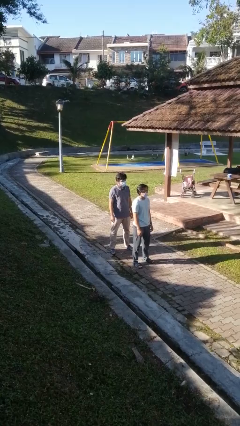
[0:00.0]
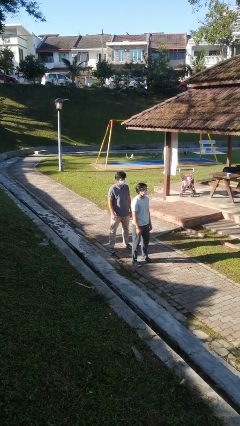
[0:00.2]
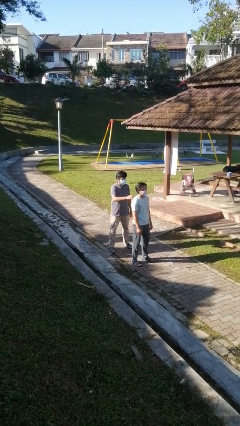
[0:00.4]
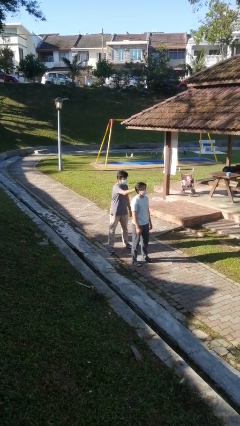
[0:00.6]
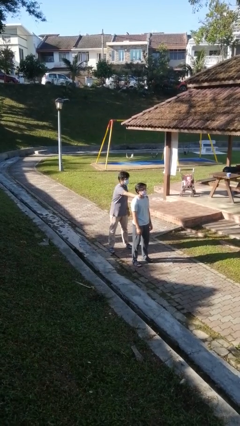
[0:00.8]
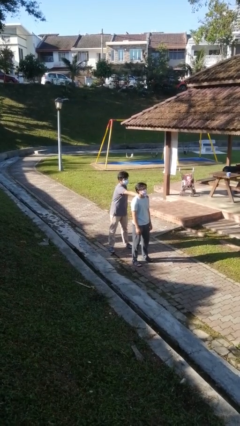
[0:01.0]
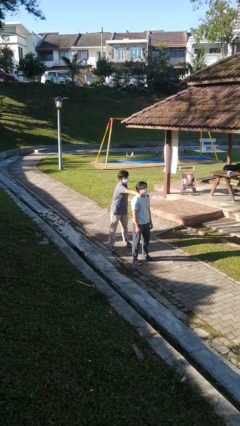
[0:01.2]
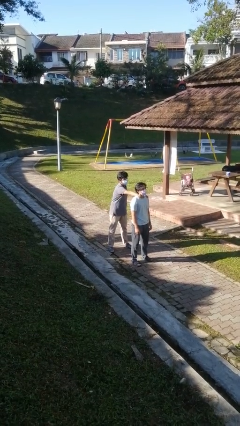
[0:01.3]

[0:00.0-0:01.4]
person grabs person by shoulder

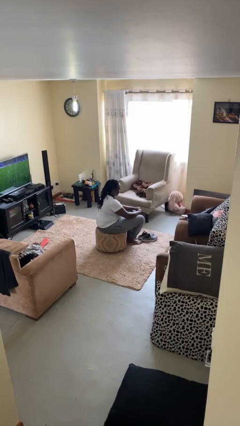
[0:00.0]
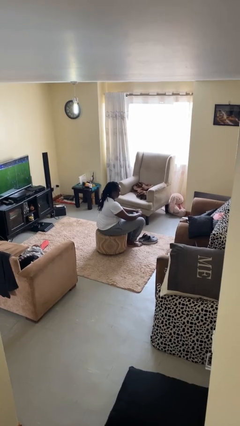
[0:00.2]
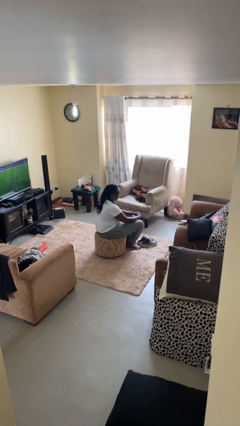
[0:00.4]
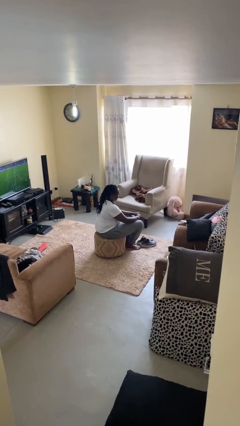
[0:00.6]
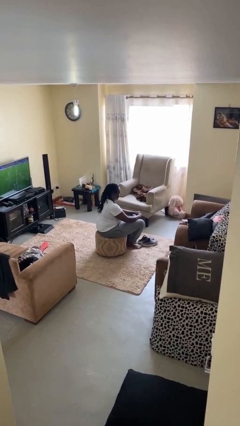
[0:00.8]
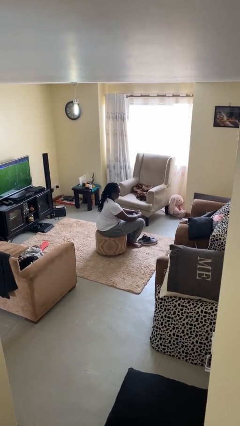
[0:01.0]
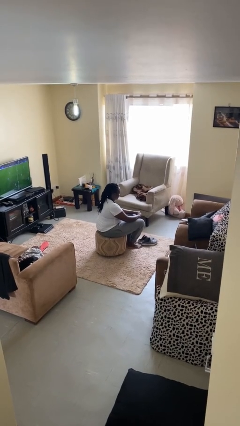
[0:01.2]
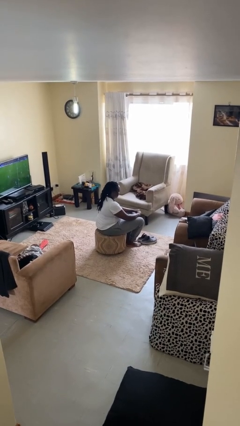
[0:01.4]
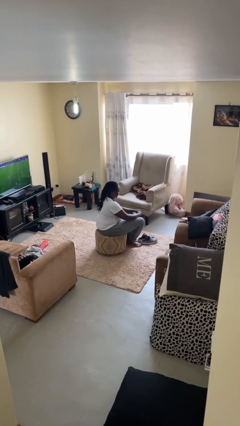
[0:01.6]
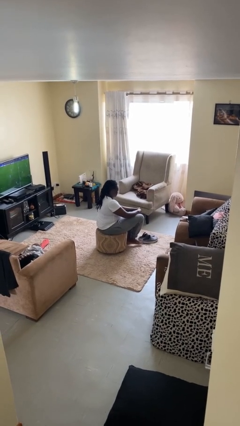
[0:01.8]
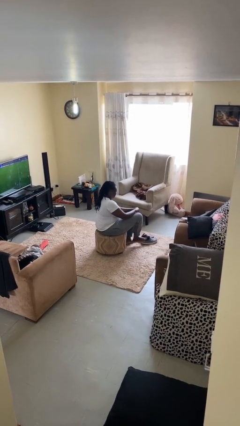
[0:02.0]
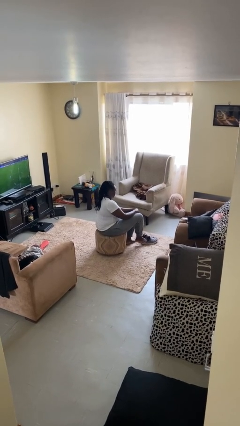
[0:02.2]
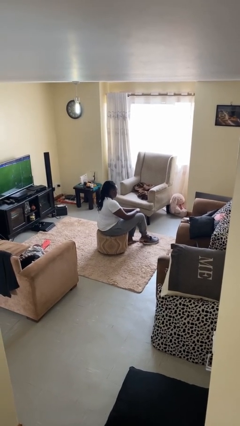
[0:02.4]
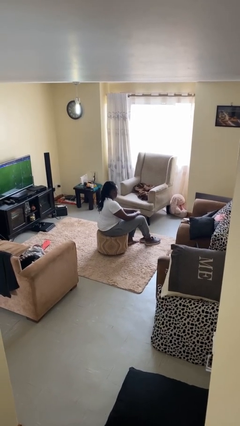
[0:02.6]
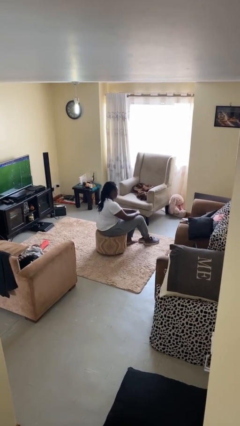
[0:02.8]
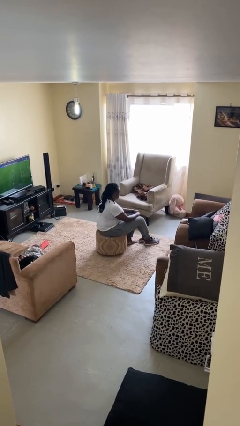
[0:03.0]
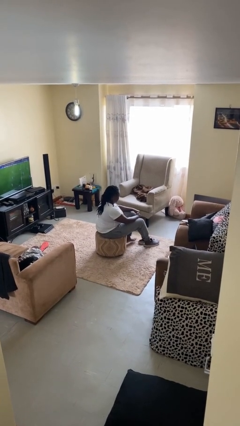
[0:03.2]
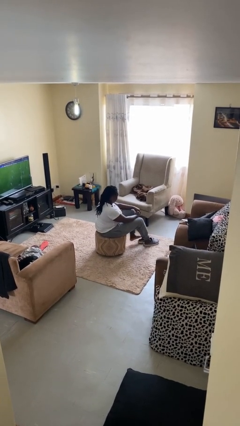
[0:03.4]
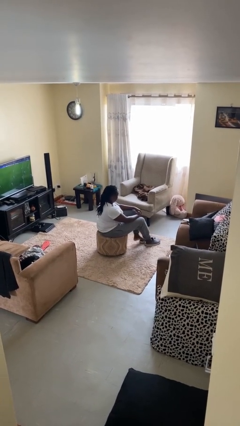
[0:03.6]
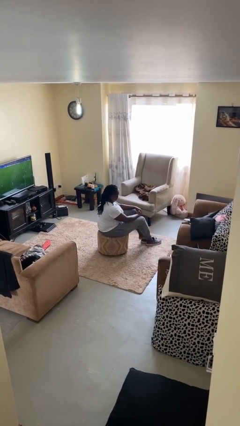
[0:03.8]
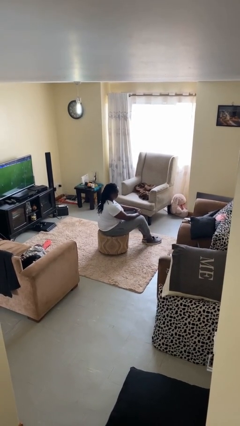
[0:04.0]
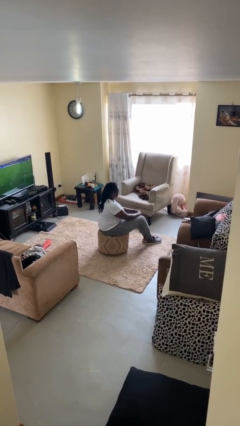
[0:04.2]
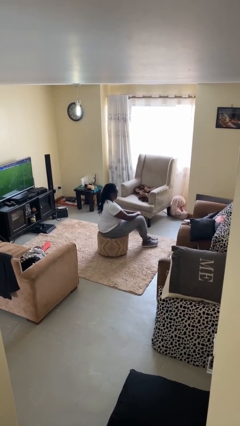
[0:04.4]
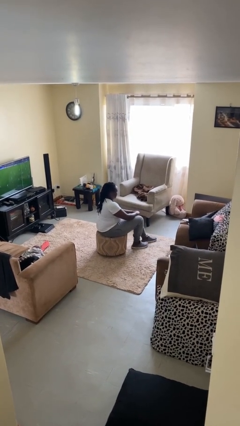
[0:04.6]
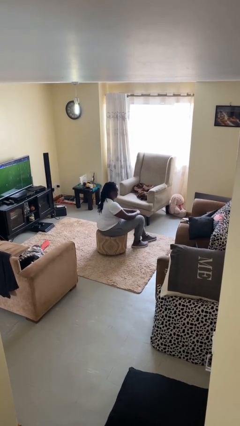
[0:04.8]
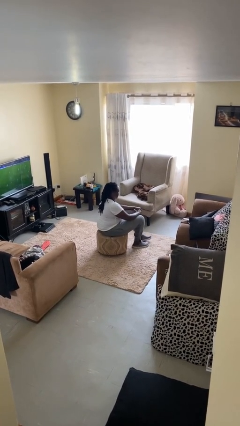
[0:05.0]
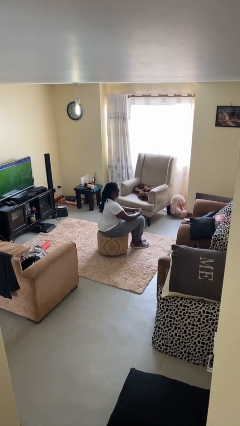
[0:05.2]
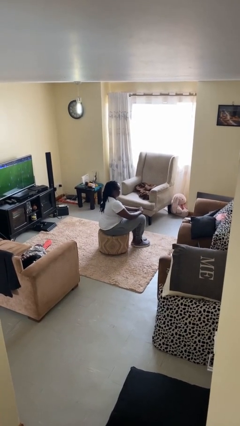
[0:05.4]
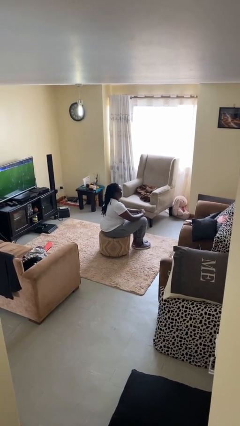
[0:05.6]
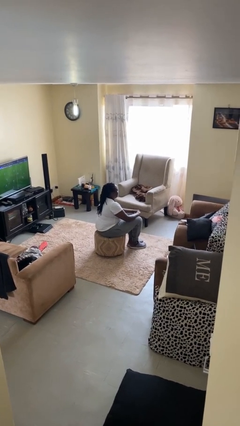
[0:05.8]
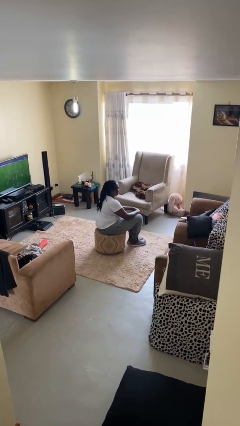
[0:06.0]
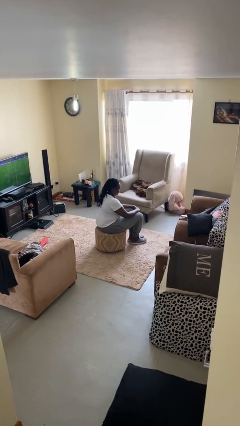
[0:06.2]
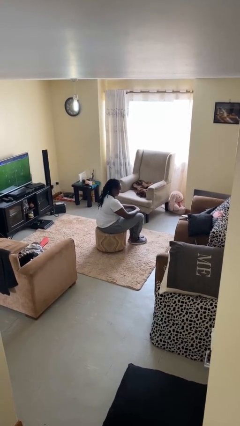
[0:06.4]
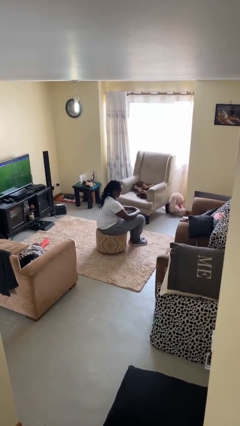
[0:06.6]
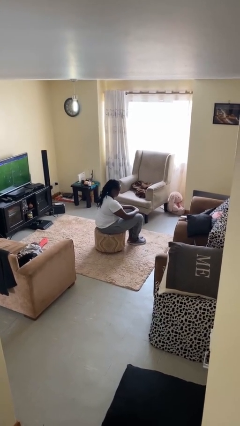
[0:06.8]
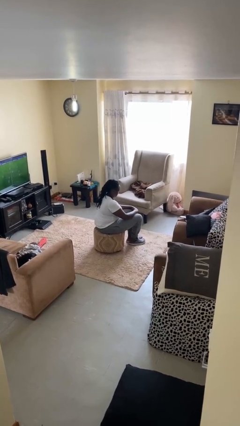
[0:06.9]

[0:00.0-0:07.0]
person puts on shoes

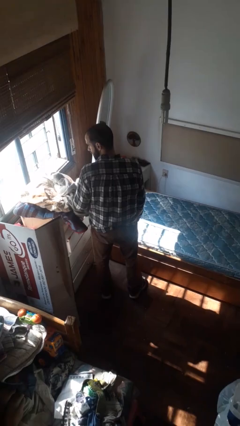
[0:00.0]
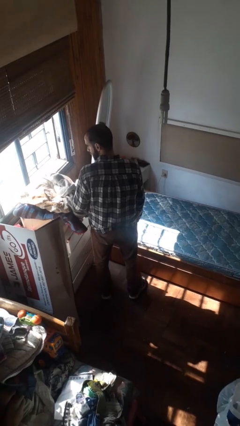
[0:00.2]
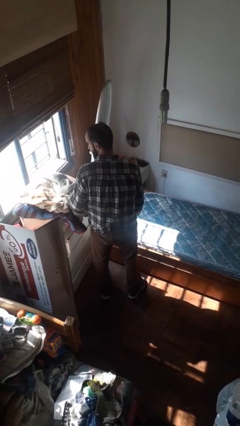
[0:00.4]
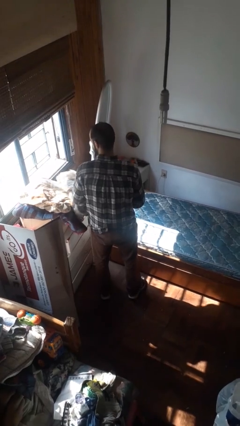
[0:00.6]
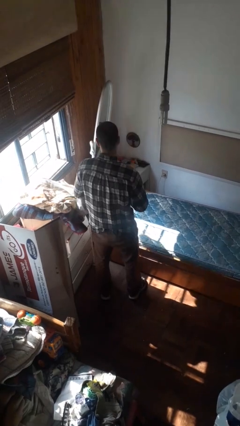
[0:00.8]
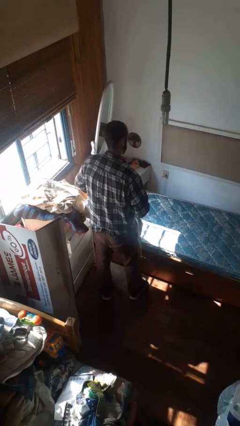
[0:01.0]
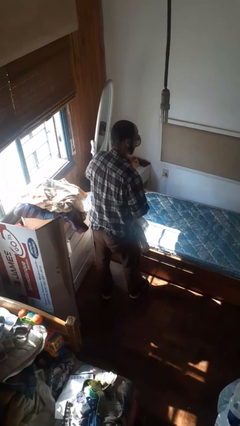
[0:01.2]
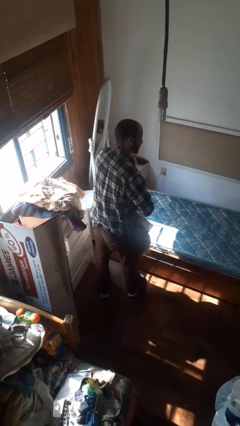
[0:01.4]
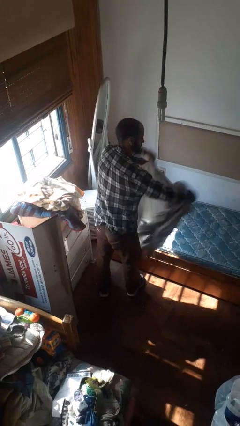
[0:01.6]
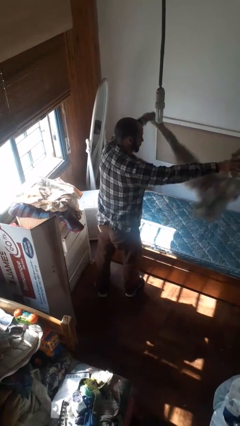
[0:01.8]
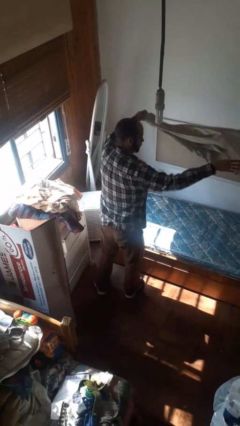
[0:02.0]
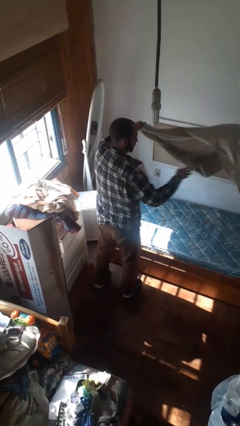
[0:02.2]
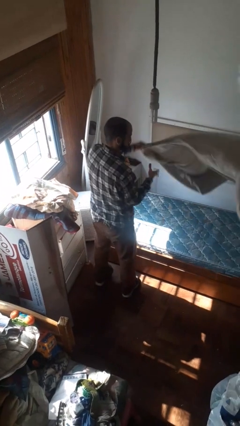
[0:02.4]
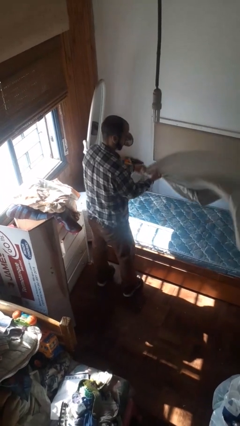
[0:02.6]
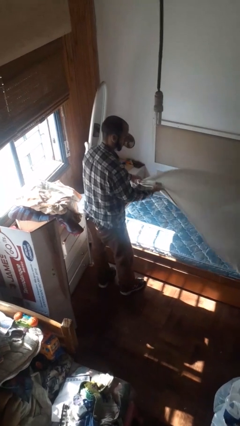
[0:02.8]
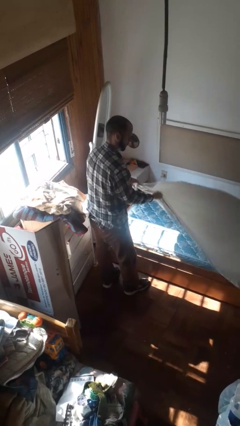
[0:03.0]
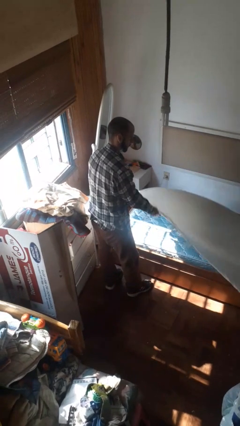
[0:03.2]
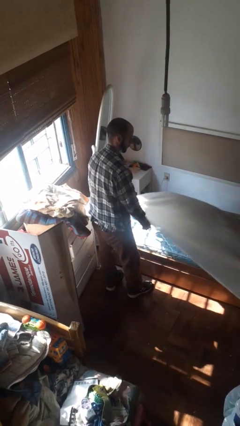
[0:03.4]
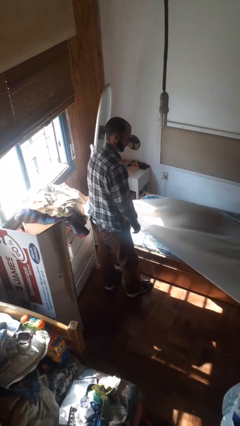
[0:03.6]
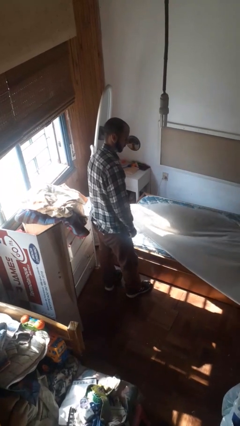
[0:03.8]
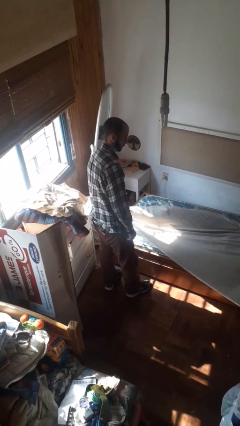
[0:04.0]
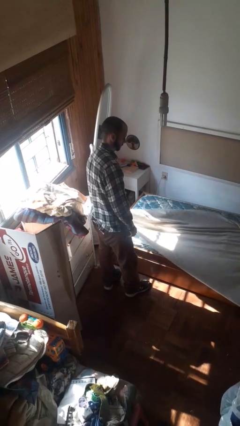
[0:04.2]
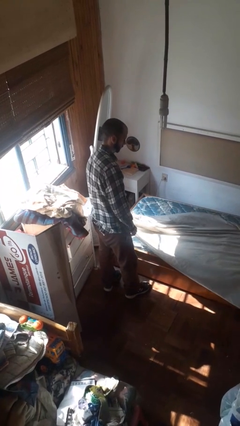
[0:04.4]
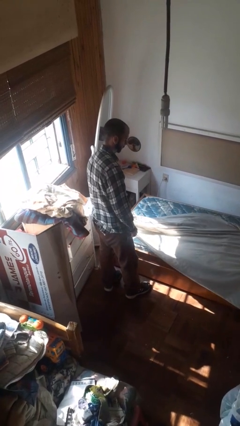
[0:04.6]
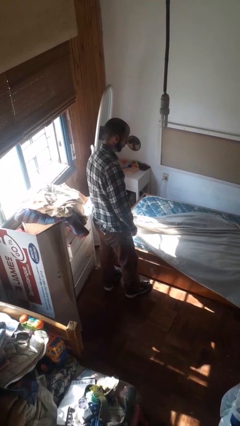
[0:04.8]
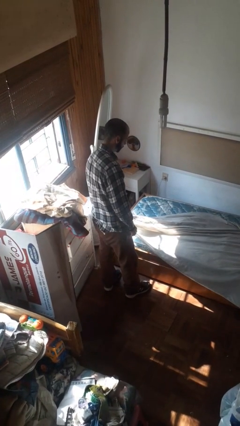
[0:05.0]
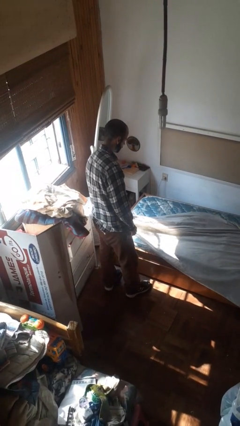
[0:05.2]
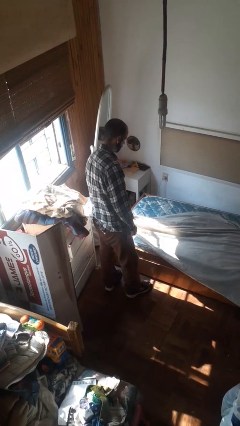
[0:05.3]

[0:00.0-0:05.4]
person makes bed

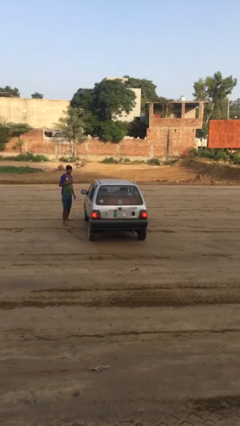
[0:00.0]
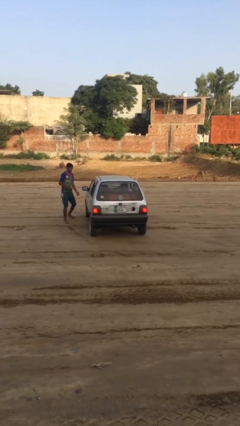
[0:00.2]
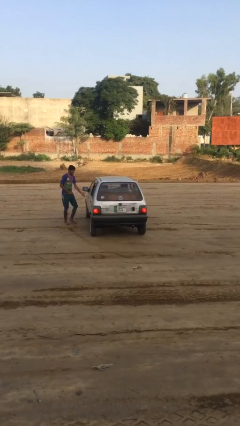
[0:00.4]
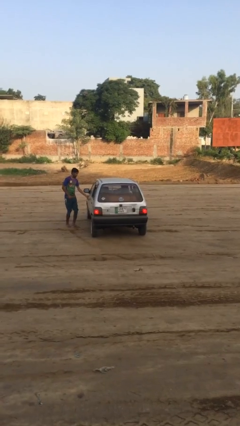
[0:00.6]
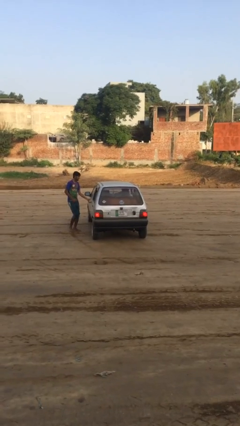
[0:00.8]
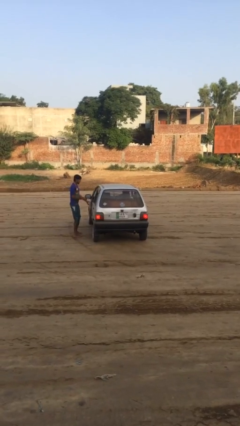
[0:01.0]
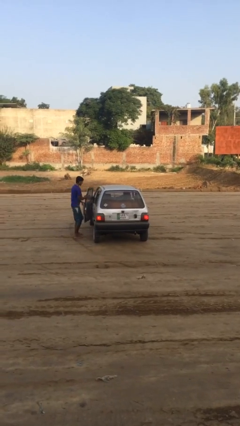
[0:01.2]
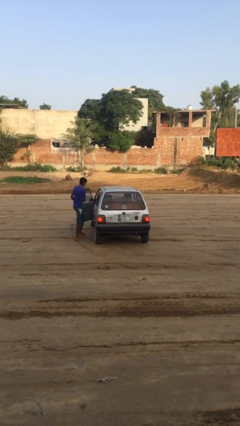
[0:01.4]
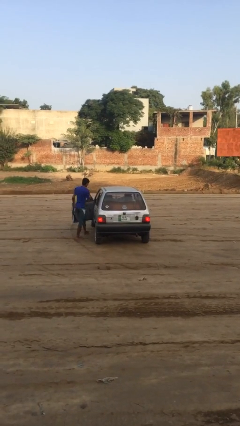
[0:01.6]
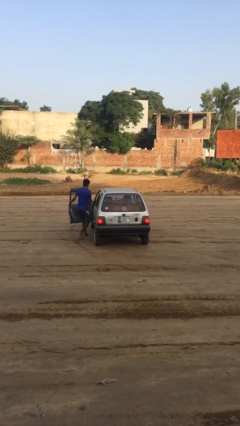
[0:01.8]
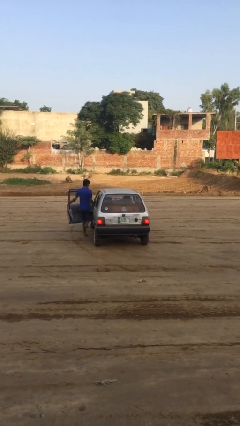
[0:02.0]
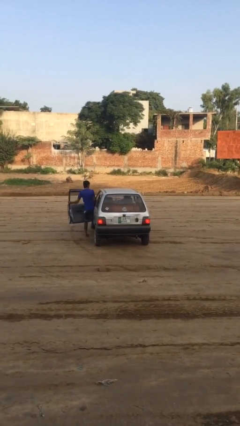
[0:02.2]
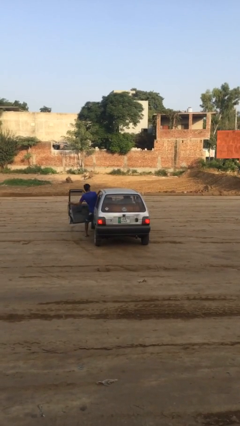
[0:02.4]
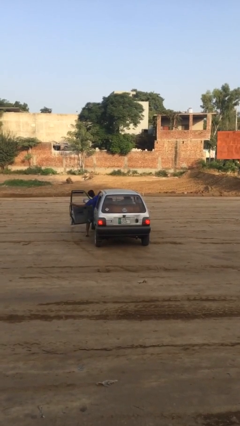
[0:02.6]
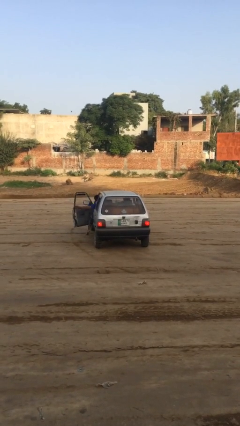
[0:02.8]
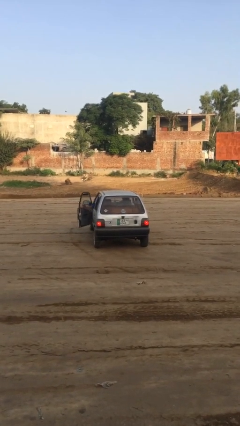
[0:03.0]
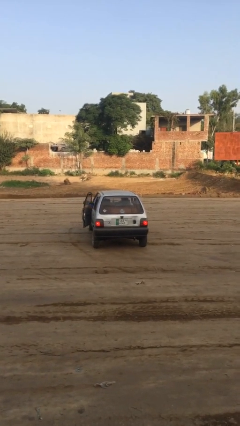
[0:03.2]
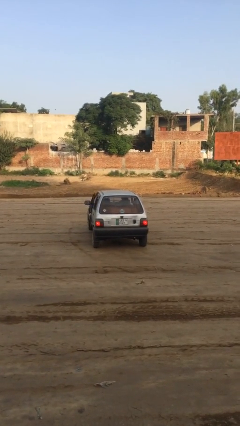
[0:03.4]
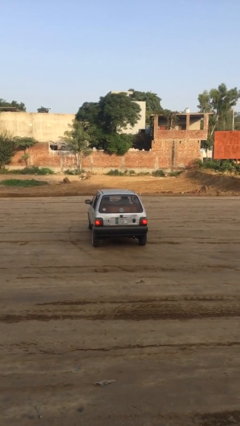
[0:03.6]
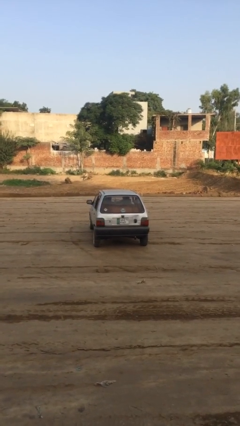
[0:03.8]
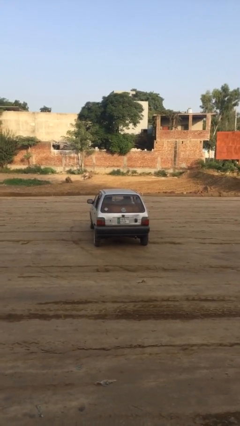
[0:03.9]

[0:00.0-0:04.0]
car picks up person

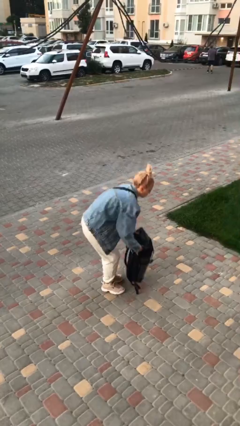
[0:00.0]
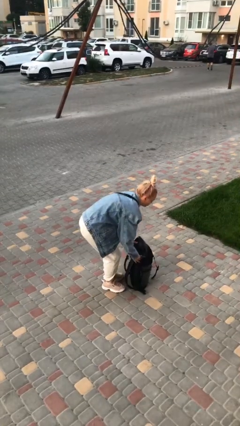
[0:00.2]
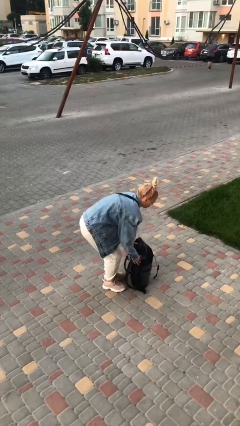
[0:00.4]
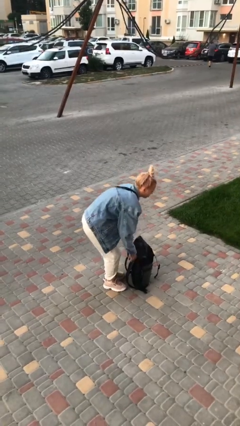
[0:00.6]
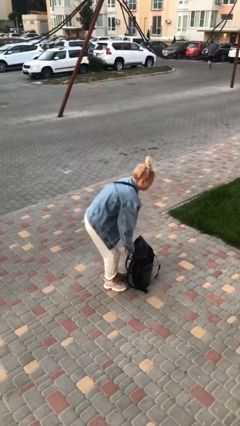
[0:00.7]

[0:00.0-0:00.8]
person puts down object on floor
